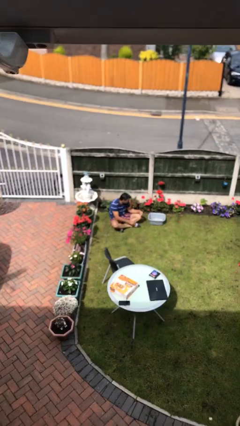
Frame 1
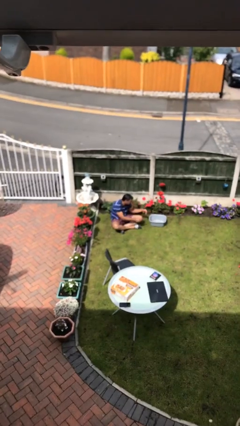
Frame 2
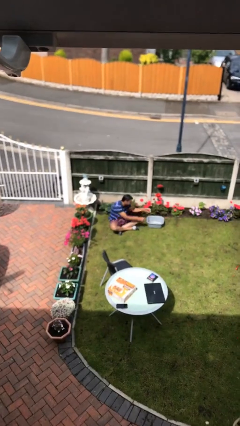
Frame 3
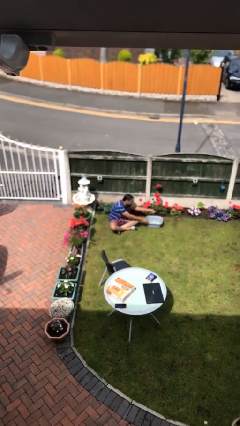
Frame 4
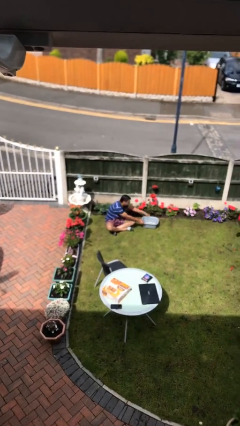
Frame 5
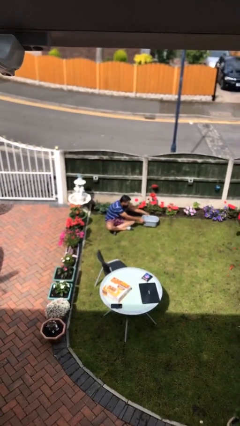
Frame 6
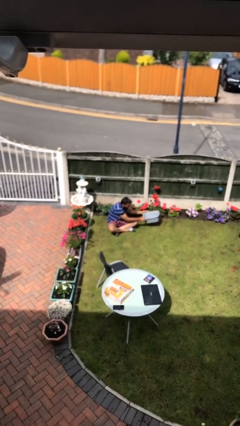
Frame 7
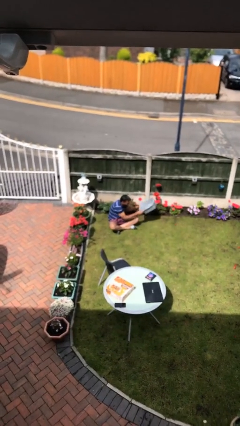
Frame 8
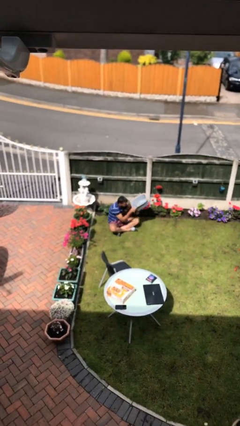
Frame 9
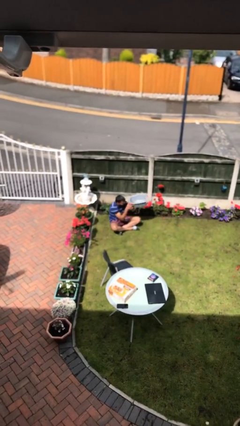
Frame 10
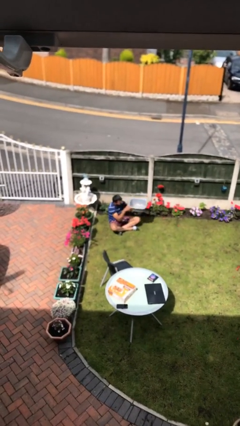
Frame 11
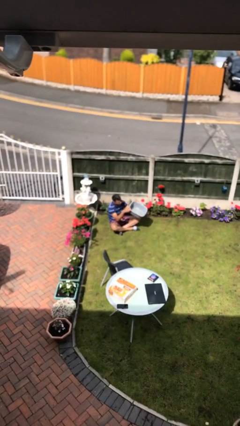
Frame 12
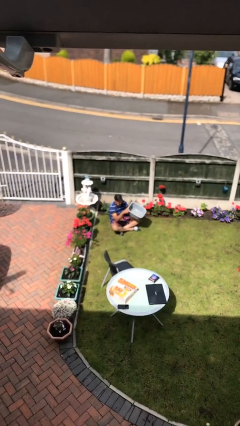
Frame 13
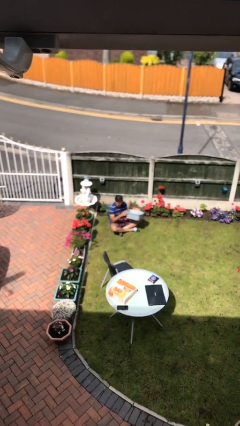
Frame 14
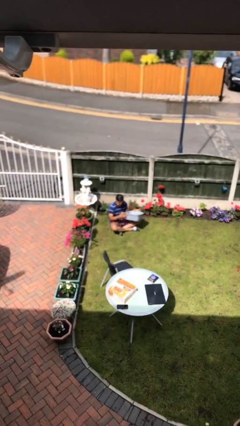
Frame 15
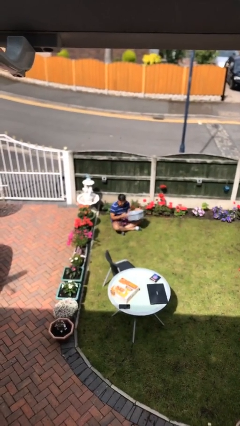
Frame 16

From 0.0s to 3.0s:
person picks up object from floor

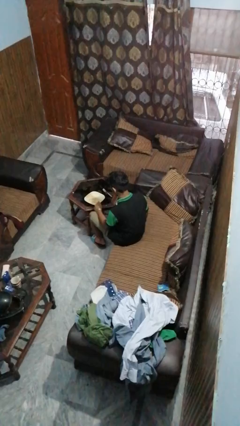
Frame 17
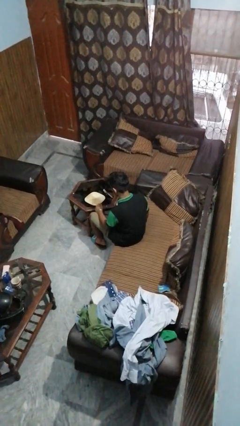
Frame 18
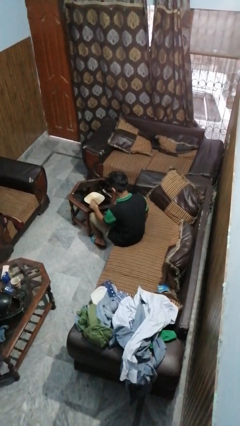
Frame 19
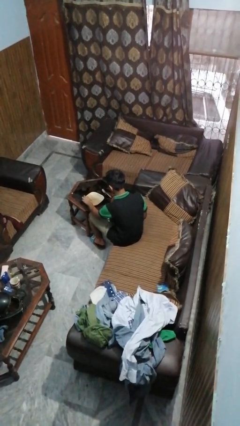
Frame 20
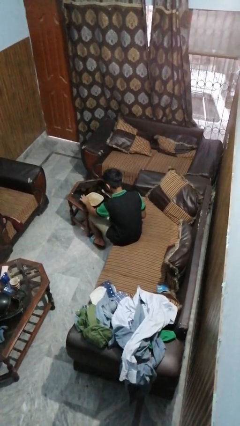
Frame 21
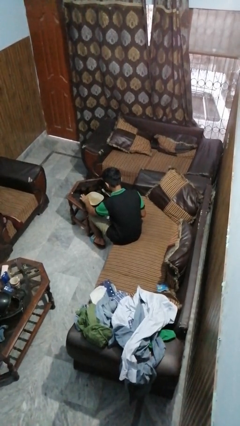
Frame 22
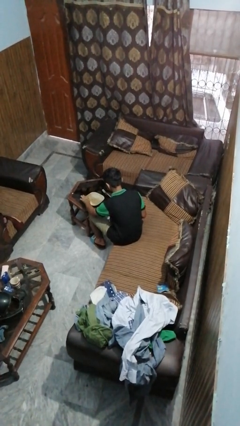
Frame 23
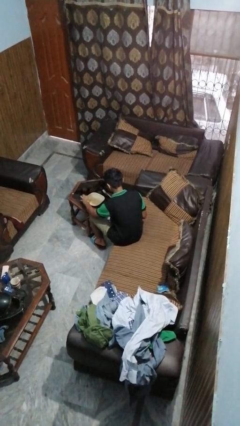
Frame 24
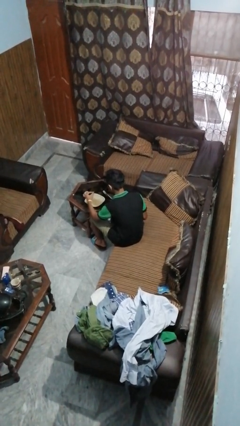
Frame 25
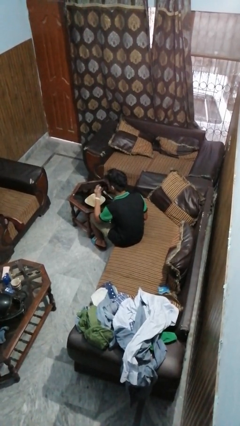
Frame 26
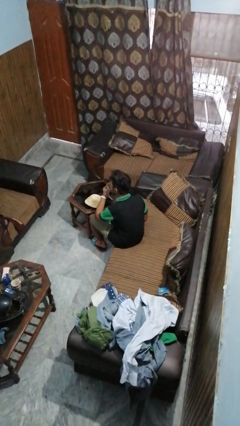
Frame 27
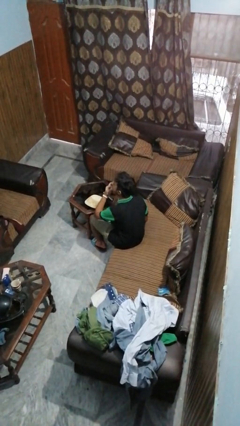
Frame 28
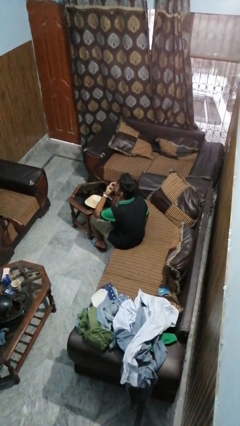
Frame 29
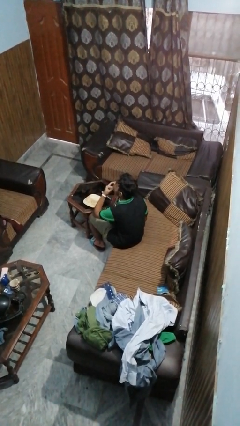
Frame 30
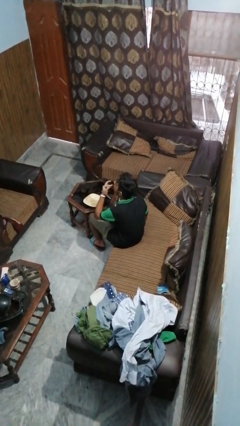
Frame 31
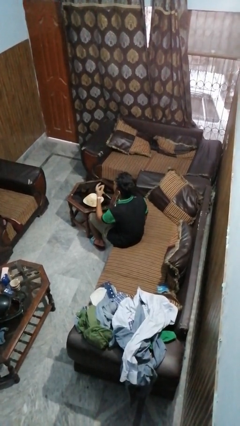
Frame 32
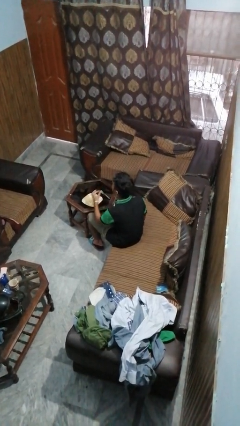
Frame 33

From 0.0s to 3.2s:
person eats with hands

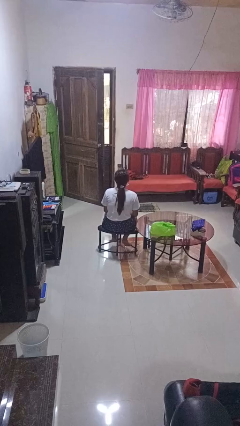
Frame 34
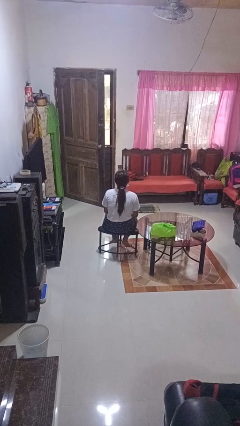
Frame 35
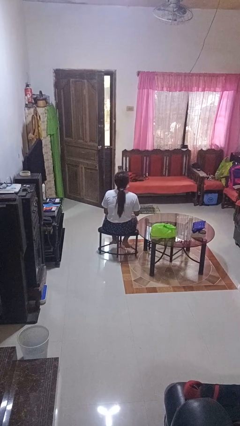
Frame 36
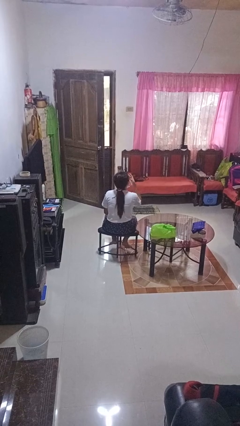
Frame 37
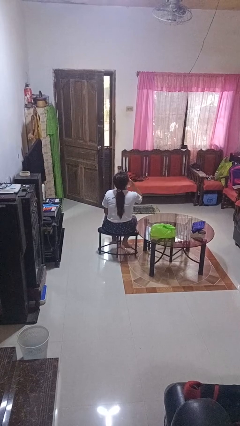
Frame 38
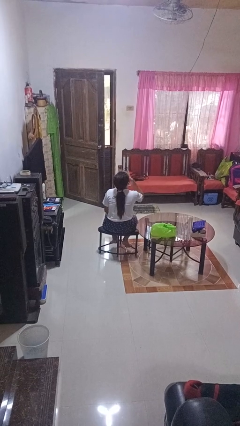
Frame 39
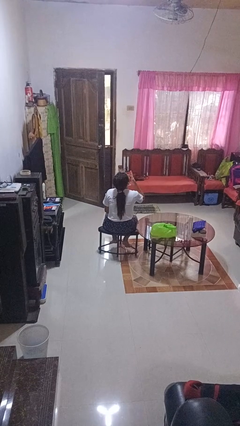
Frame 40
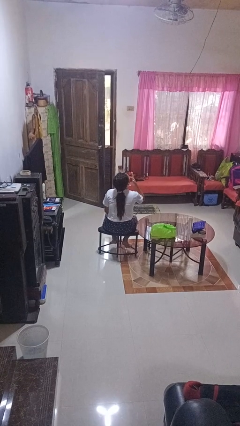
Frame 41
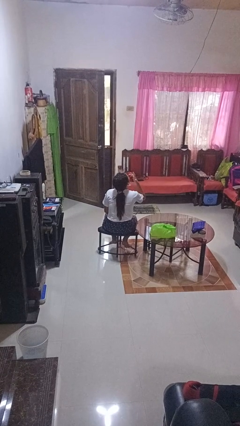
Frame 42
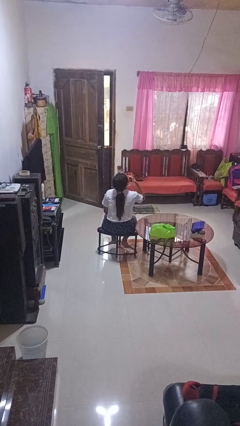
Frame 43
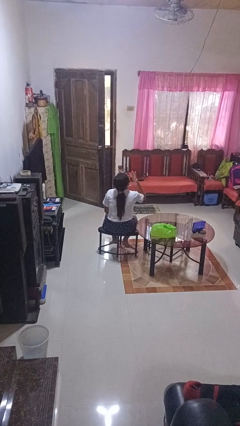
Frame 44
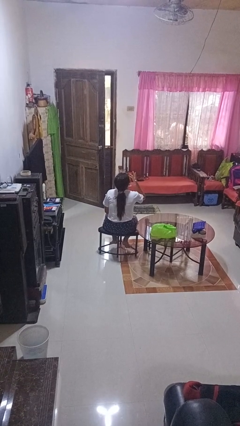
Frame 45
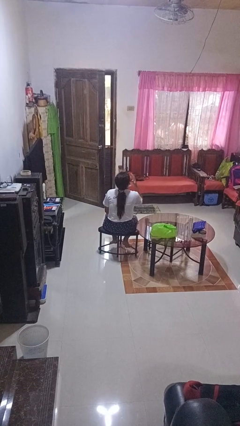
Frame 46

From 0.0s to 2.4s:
person licks fingers

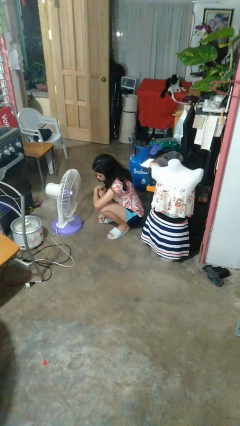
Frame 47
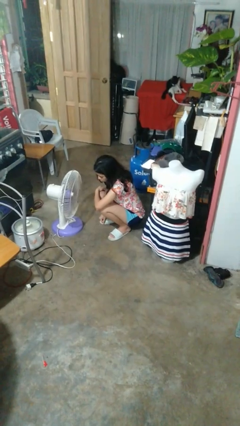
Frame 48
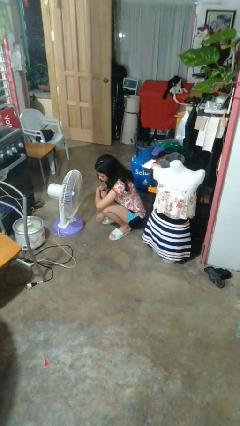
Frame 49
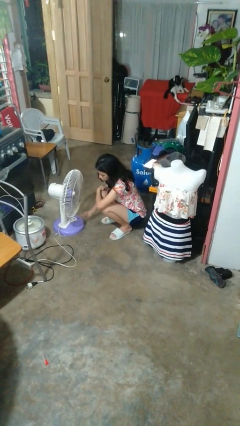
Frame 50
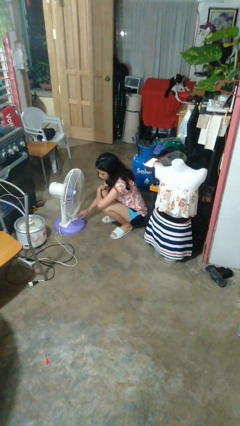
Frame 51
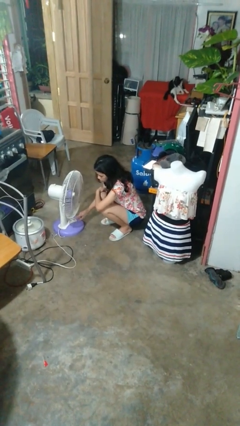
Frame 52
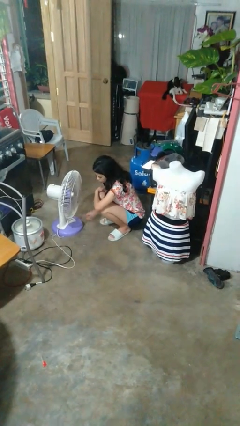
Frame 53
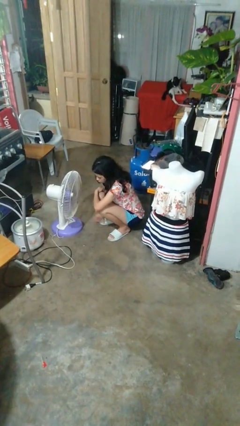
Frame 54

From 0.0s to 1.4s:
person turns off fan

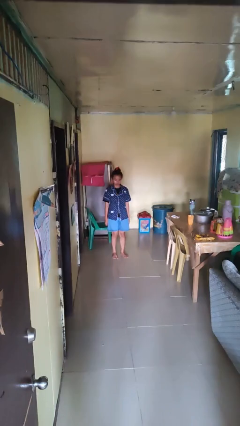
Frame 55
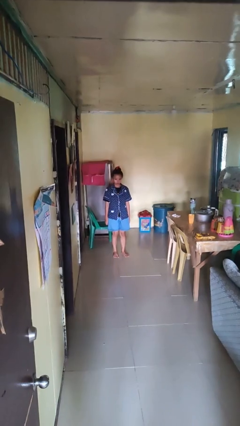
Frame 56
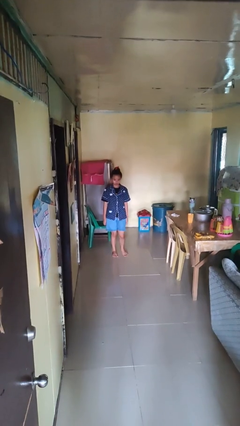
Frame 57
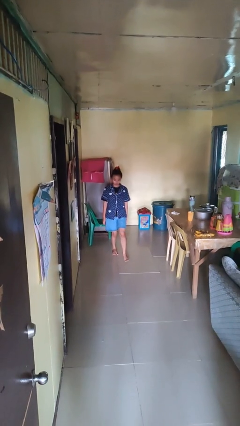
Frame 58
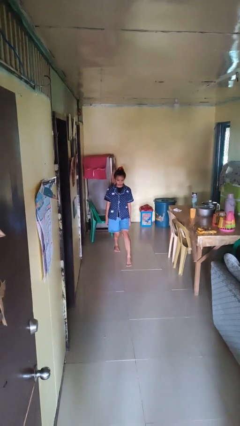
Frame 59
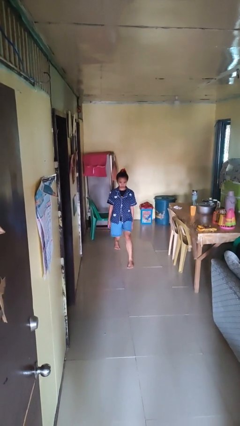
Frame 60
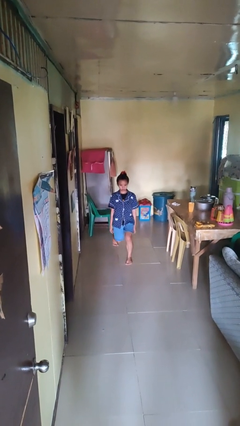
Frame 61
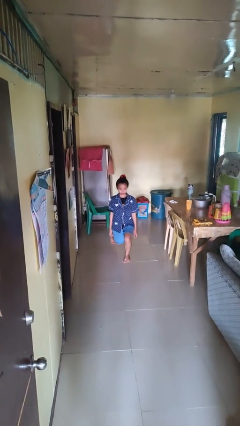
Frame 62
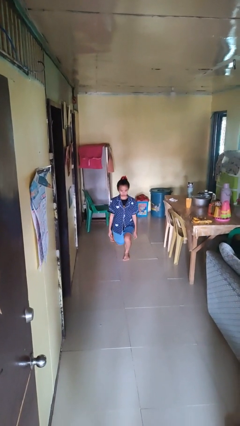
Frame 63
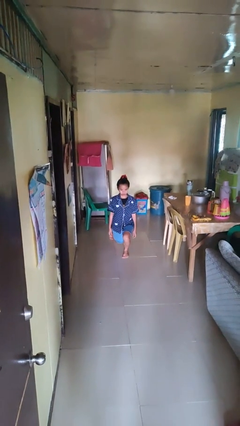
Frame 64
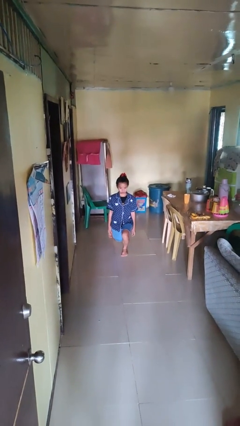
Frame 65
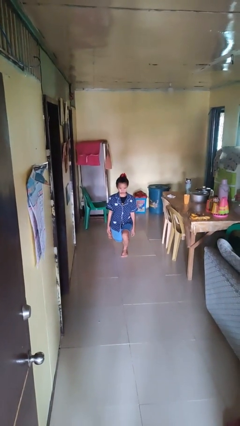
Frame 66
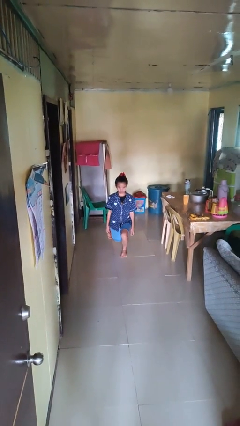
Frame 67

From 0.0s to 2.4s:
person exercises with lunges

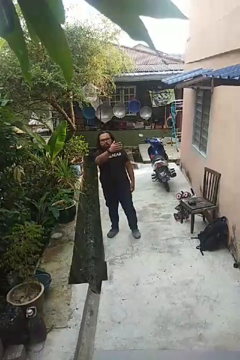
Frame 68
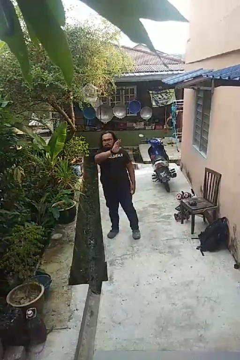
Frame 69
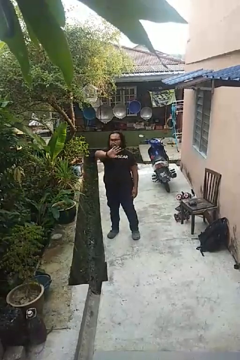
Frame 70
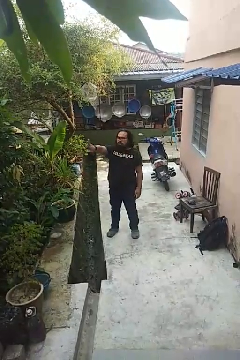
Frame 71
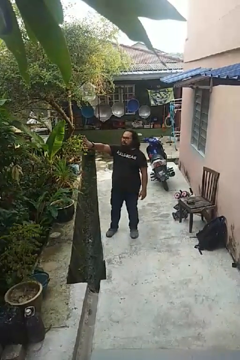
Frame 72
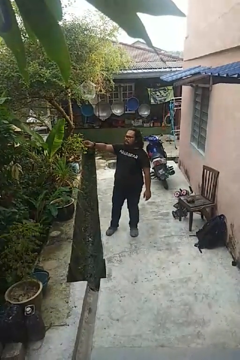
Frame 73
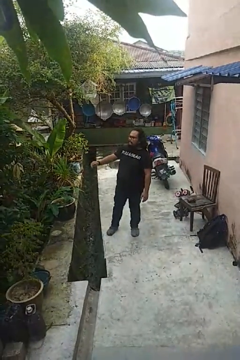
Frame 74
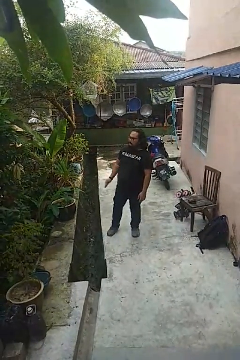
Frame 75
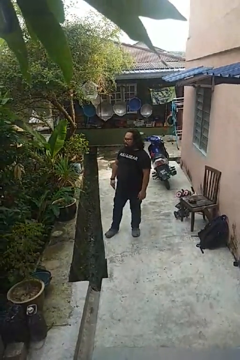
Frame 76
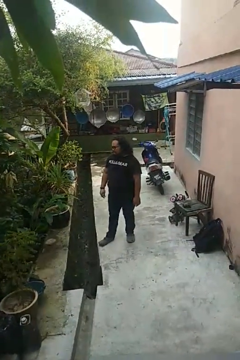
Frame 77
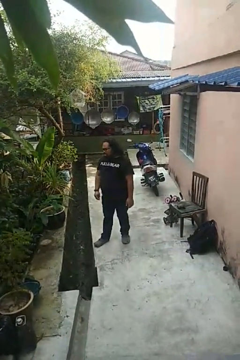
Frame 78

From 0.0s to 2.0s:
person gestures swipe right

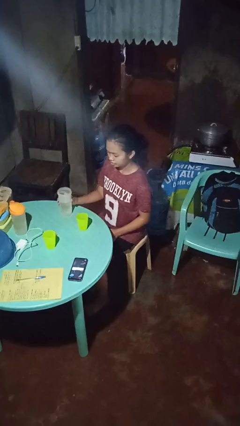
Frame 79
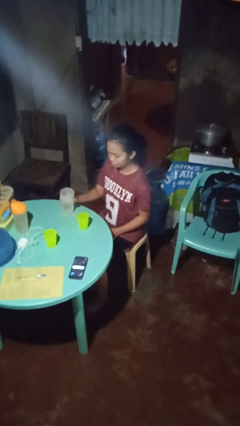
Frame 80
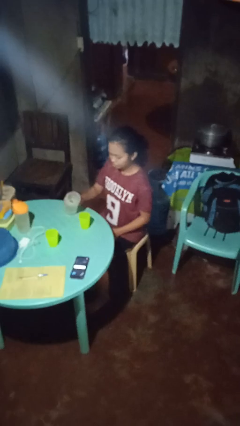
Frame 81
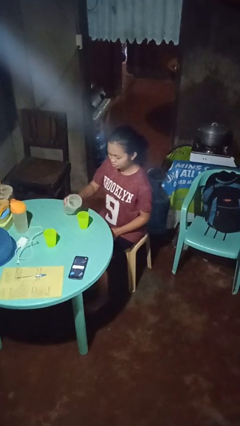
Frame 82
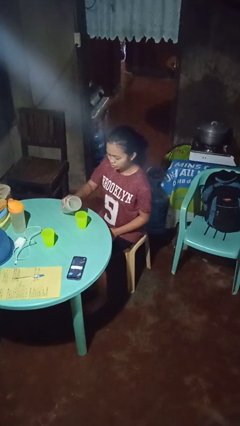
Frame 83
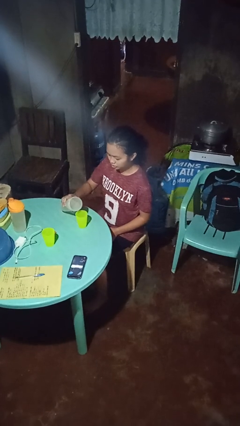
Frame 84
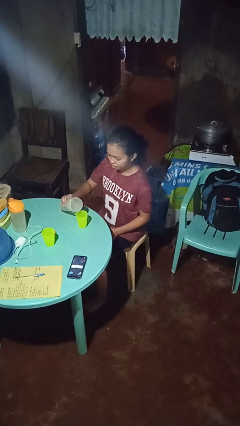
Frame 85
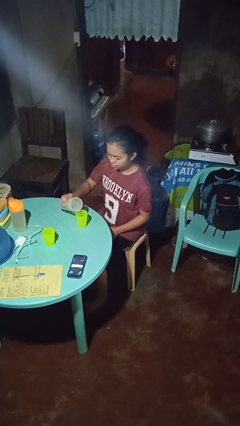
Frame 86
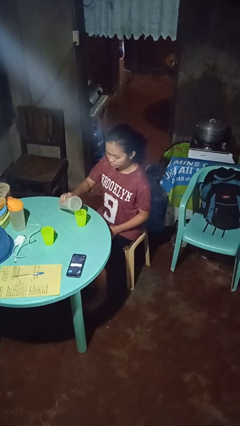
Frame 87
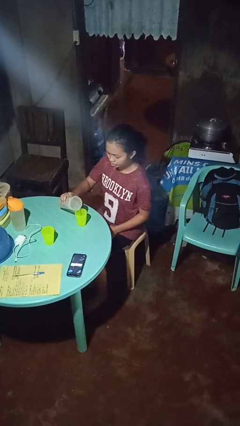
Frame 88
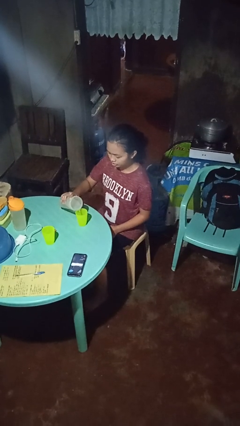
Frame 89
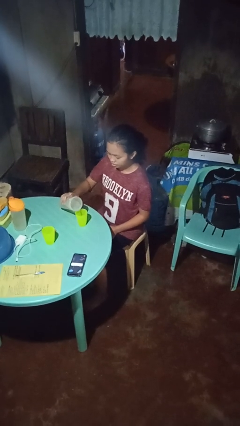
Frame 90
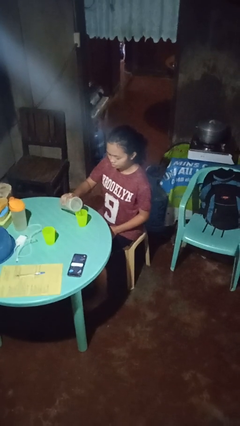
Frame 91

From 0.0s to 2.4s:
person pours liquid into cup

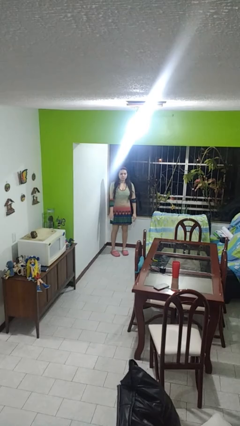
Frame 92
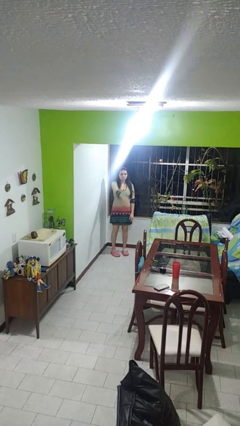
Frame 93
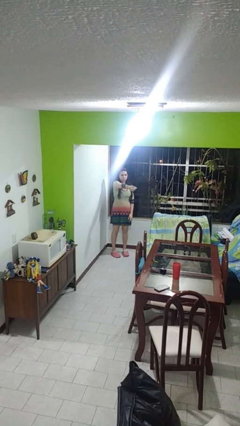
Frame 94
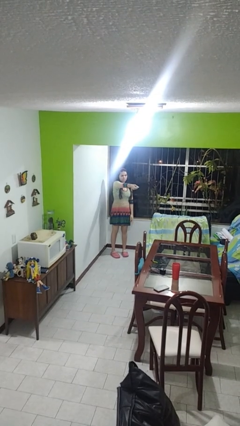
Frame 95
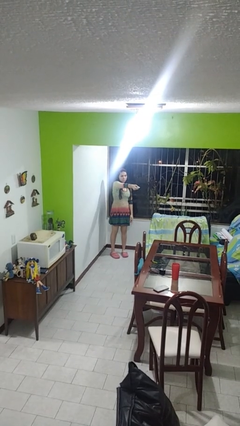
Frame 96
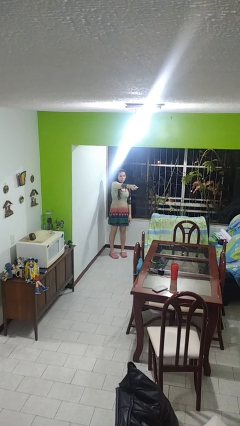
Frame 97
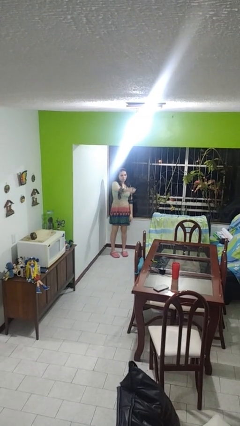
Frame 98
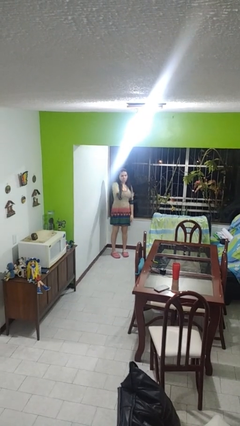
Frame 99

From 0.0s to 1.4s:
person uses television remote
